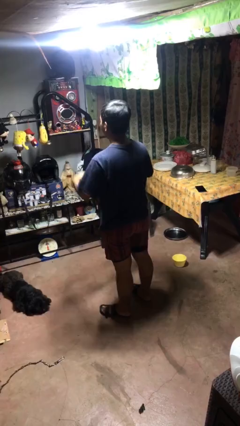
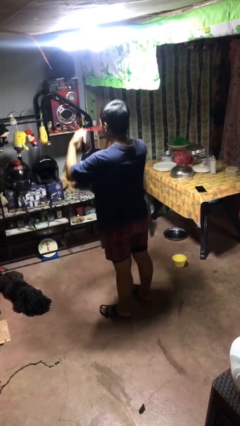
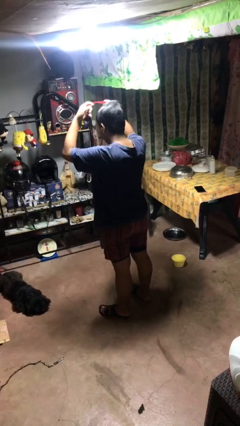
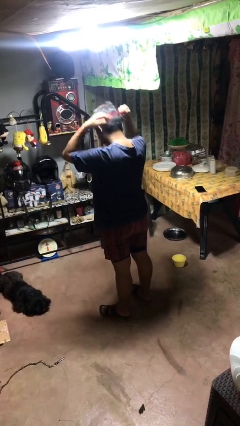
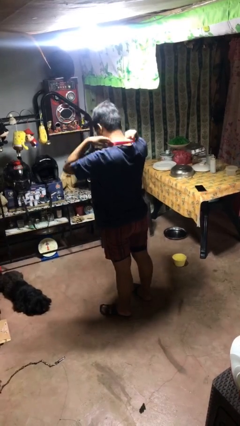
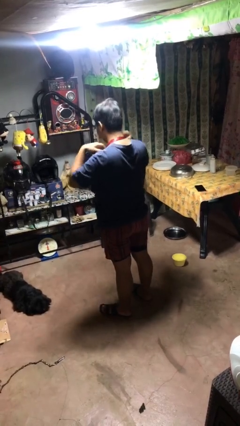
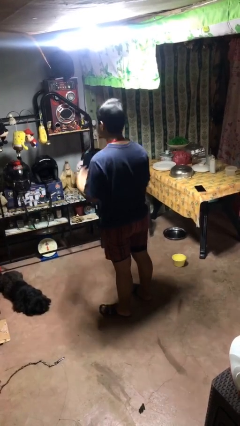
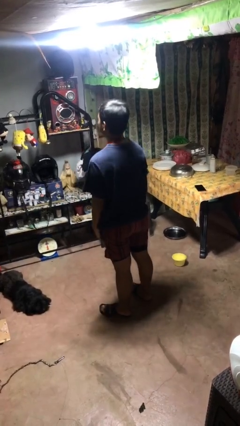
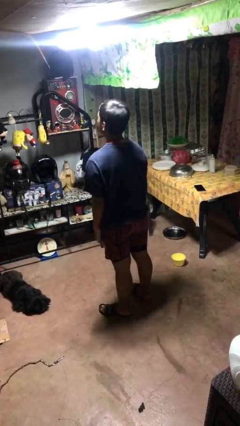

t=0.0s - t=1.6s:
person puts on necklace

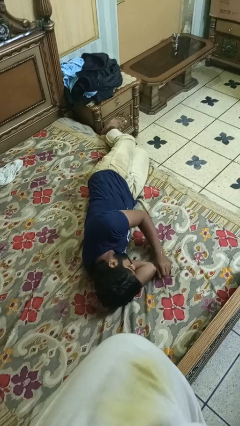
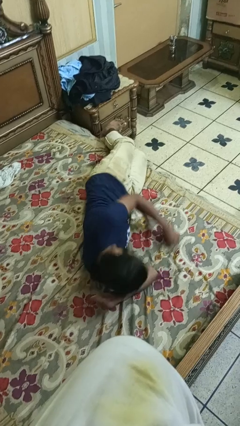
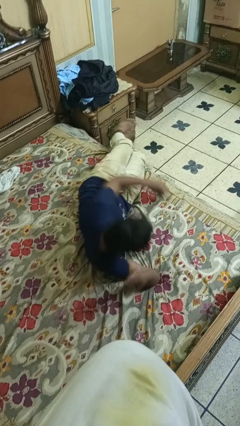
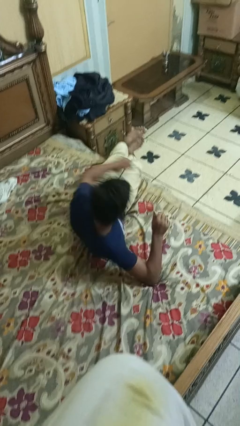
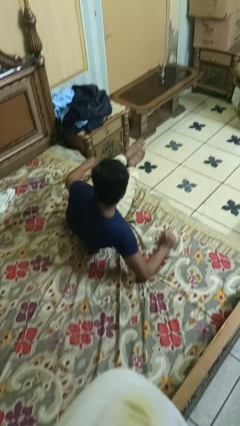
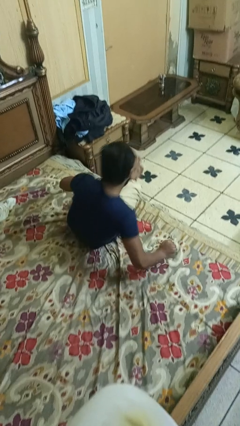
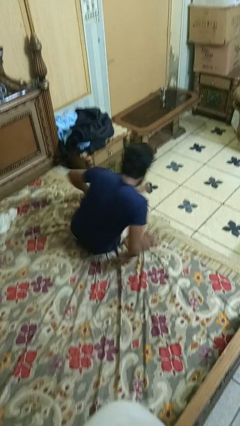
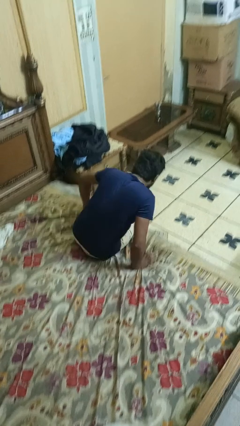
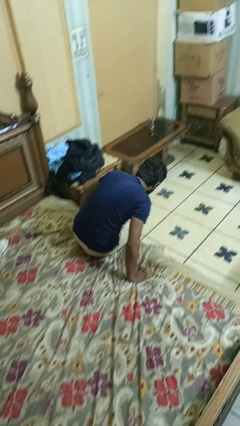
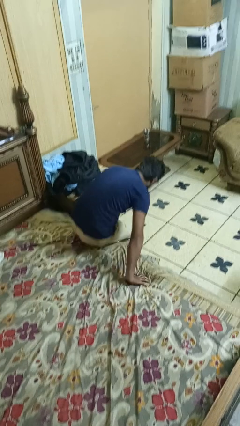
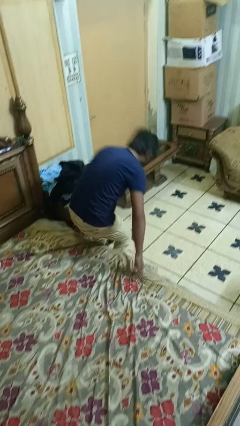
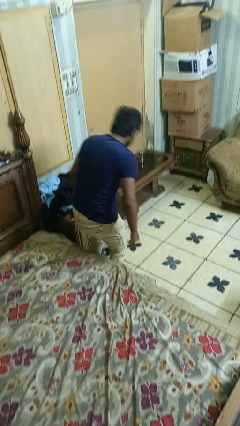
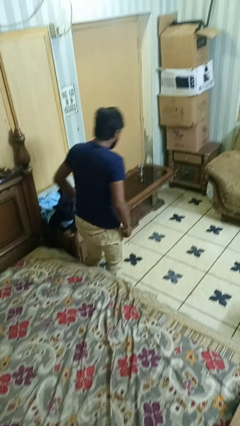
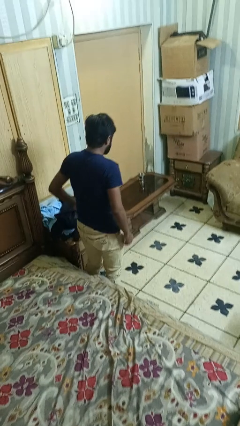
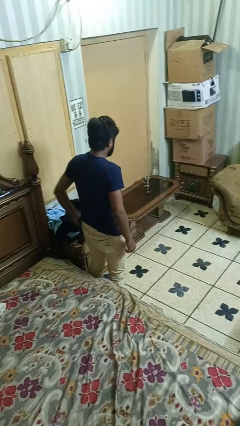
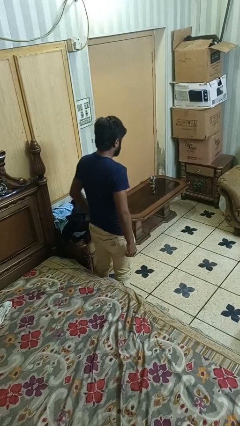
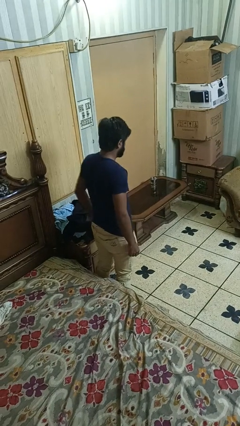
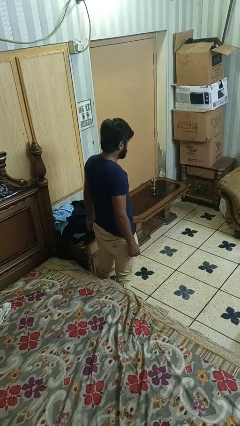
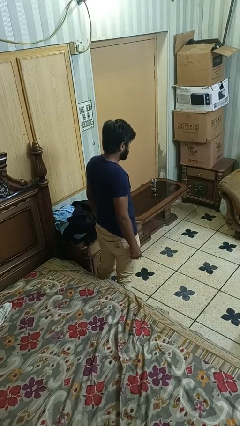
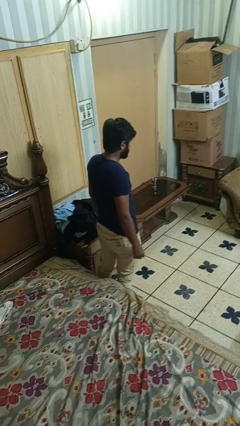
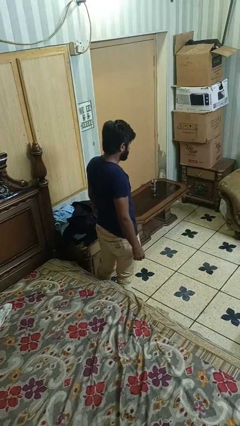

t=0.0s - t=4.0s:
person stands up

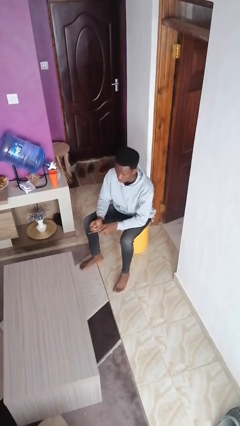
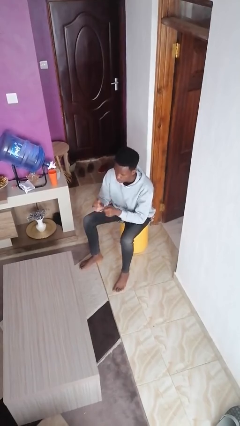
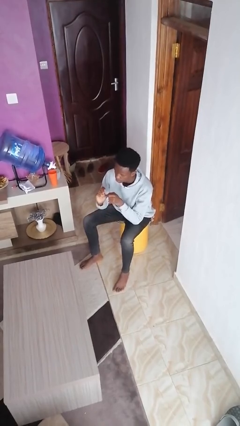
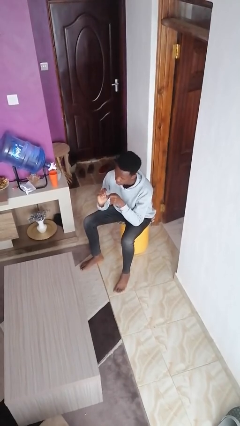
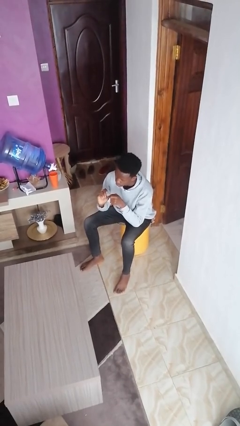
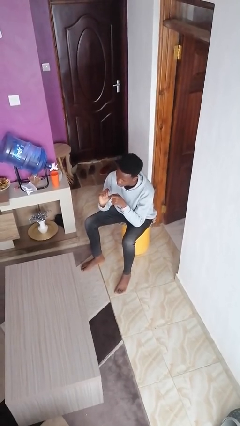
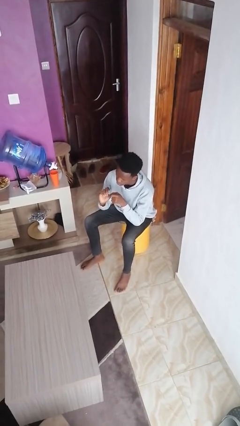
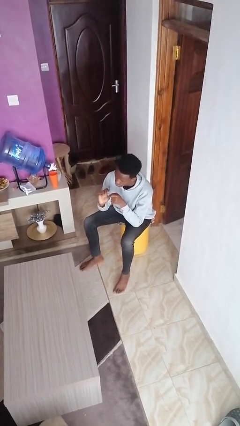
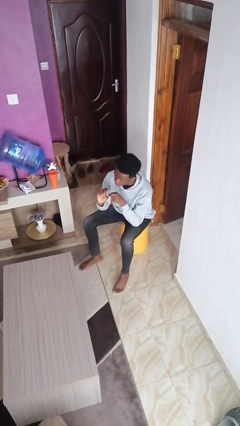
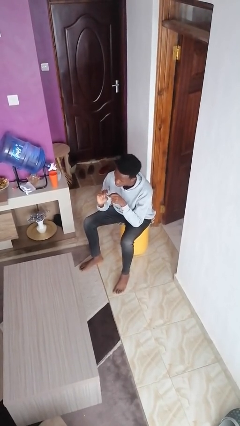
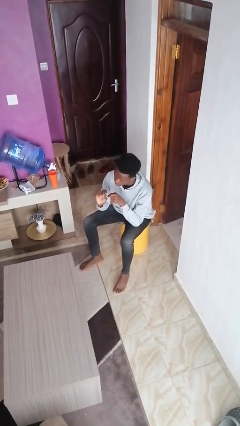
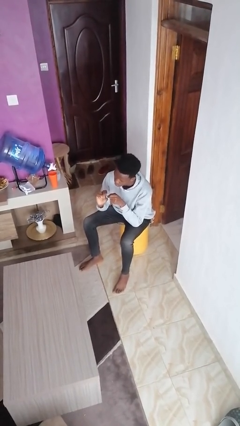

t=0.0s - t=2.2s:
person files fingernails

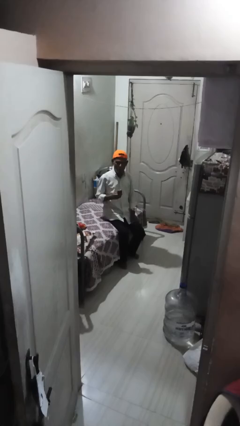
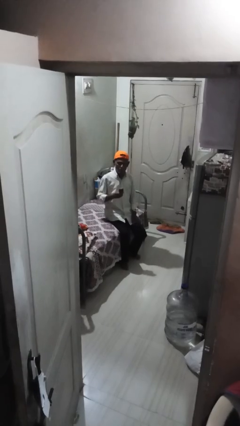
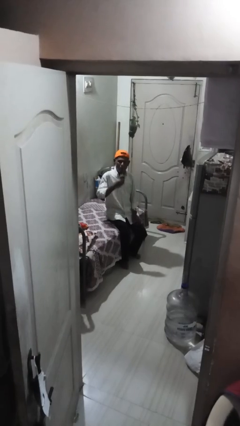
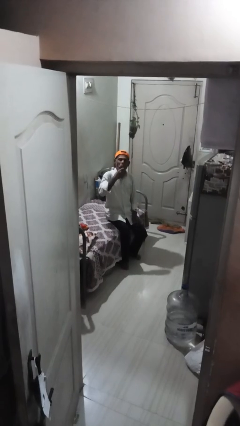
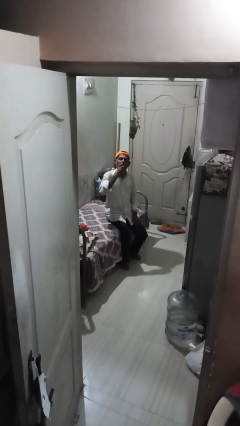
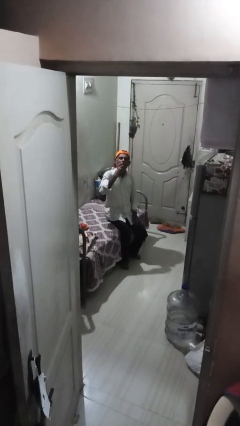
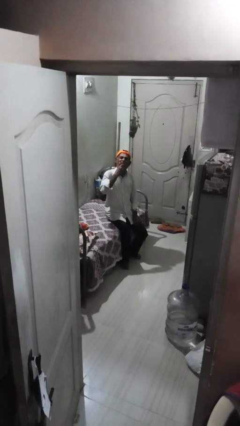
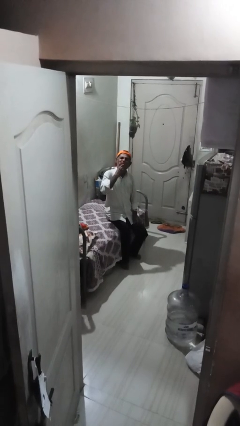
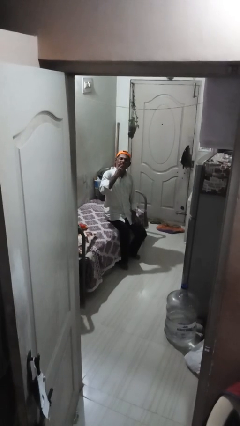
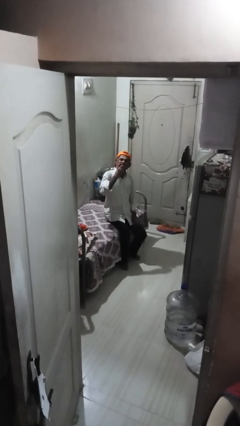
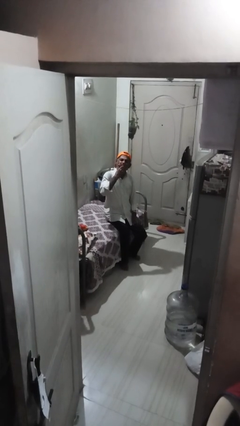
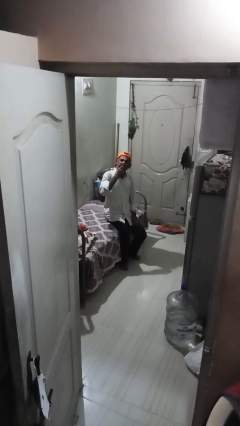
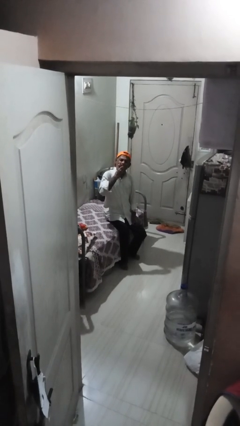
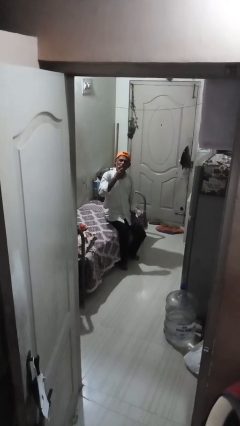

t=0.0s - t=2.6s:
person eats apple

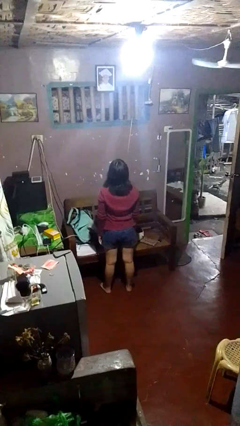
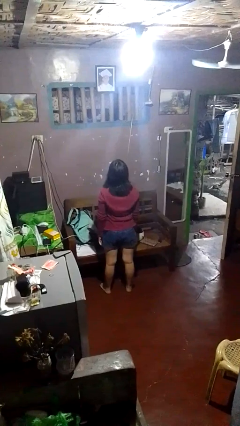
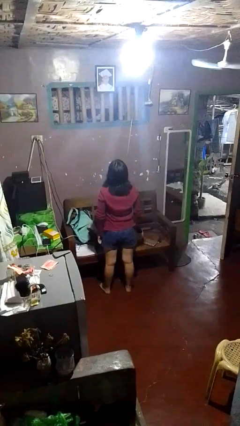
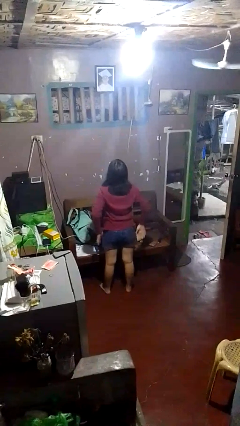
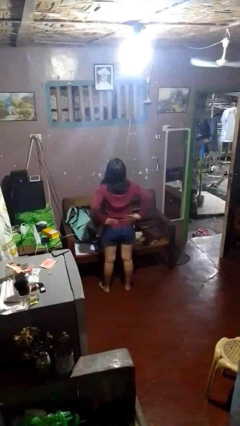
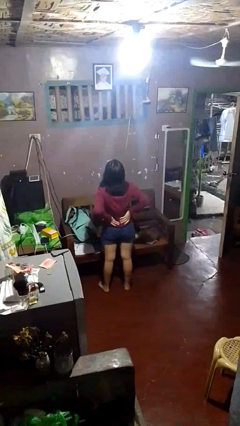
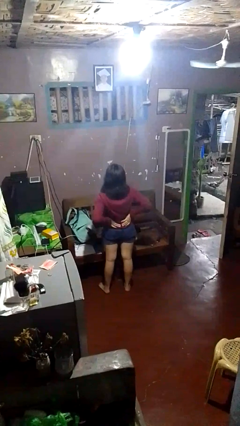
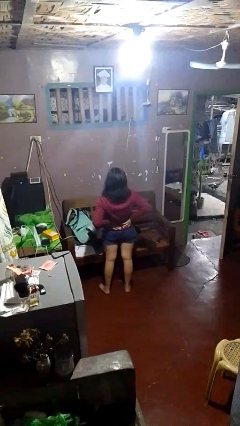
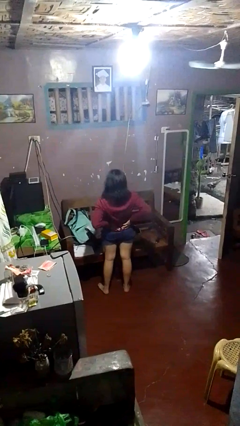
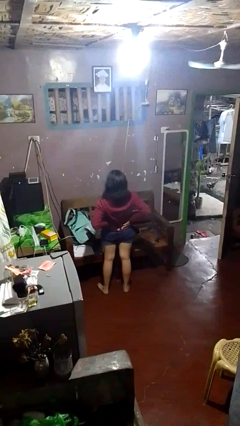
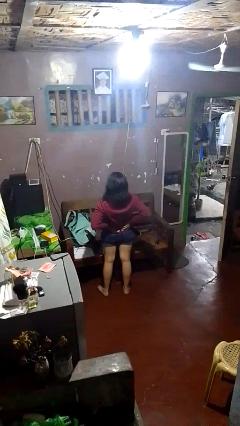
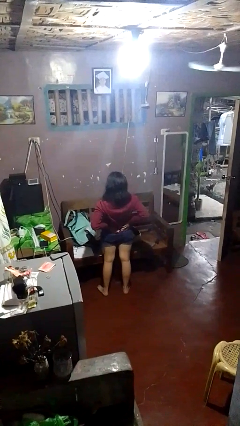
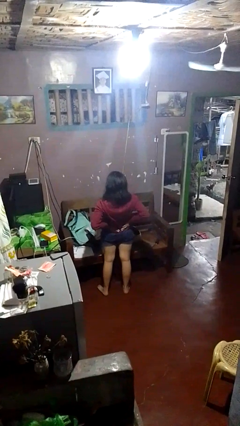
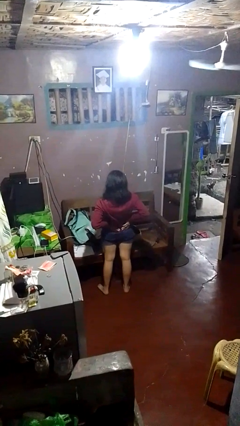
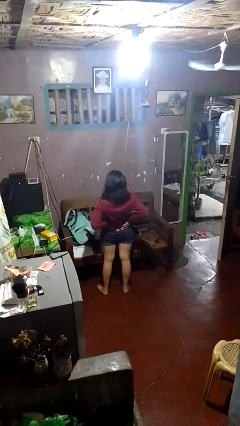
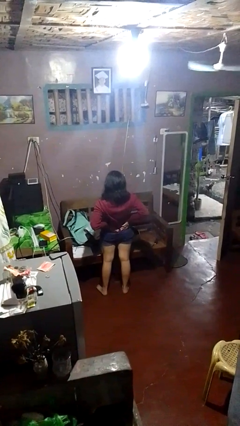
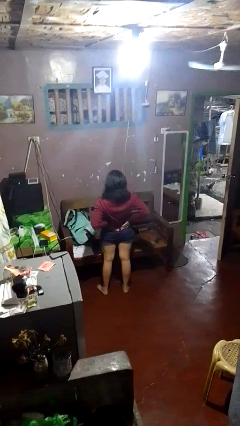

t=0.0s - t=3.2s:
person stretches back

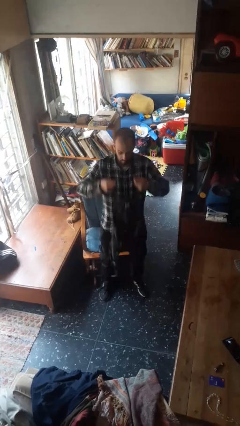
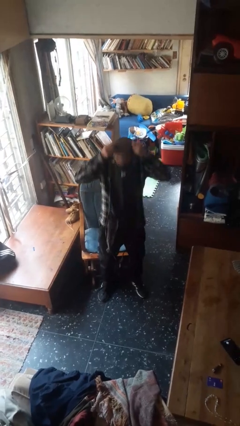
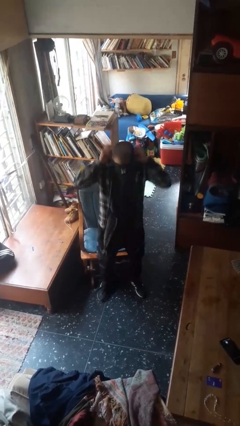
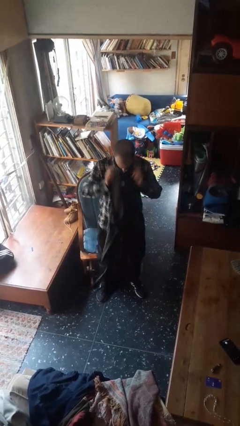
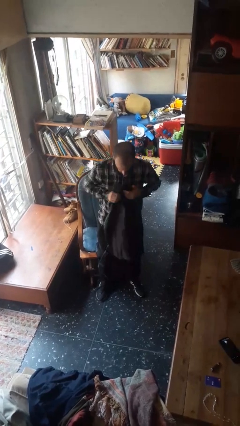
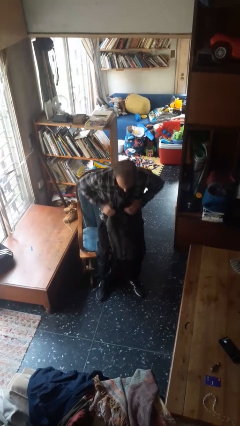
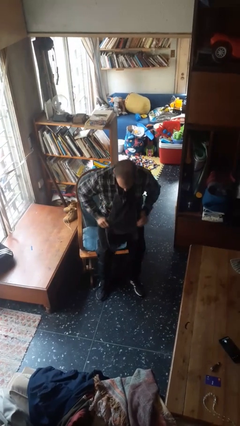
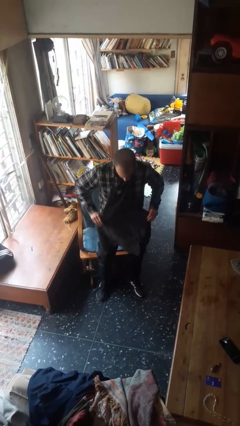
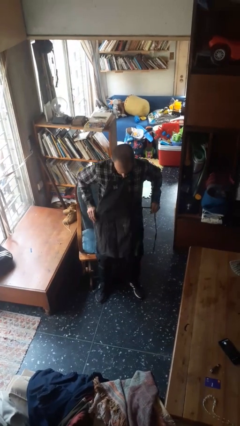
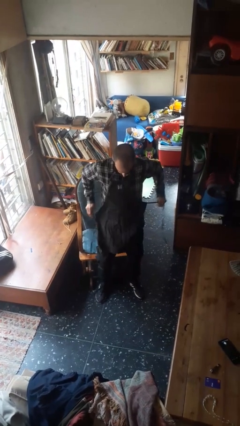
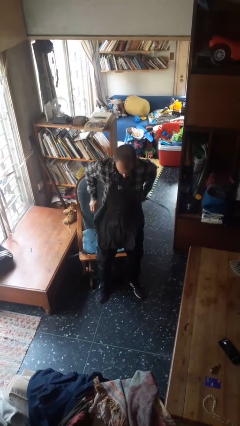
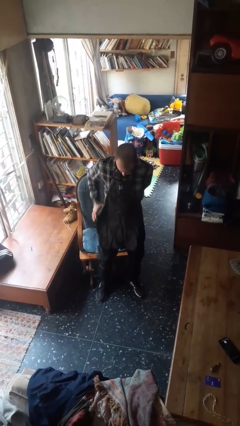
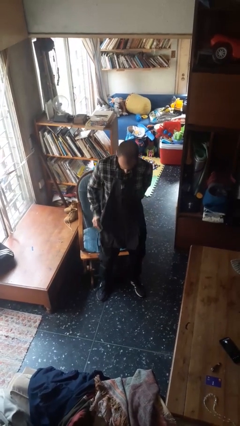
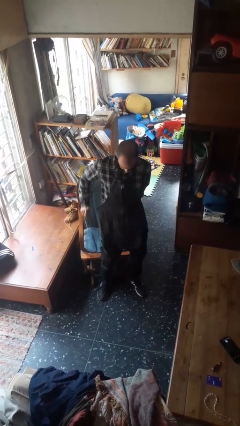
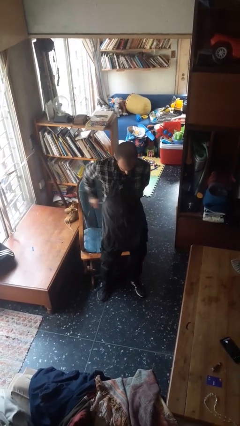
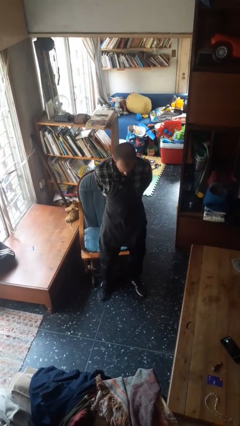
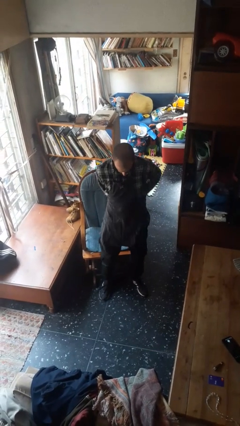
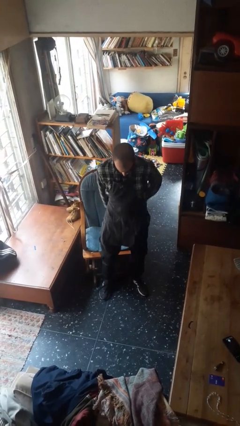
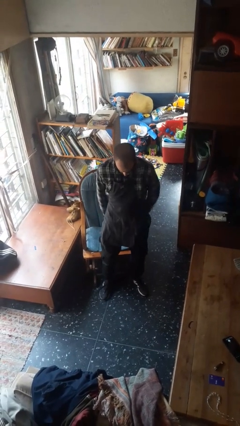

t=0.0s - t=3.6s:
person puts on apron

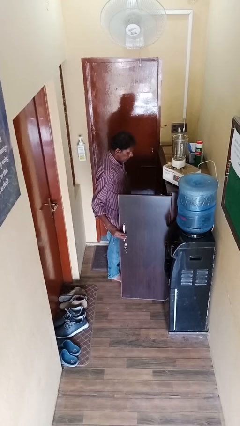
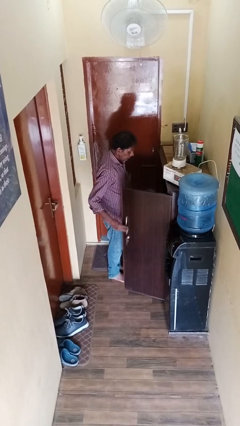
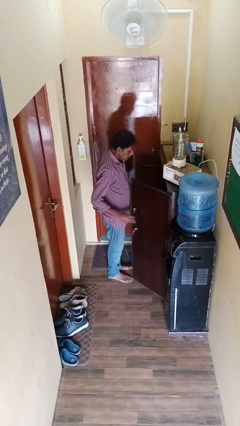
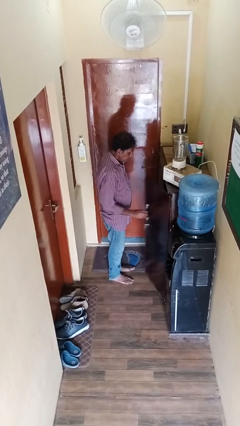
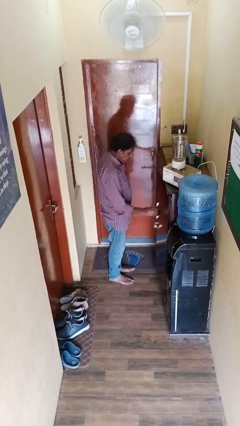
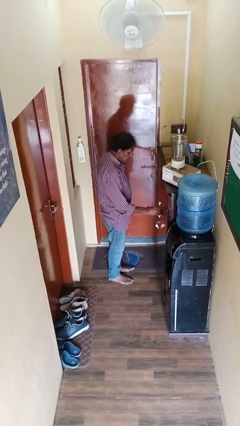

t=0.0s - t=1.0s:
person closes cabinet
